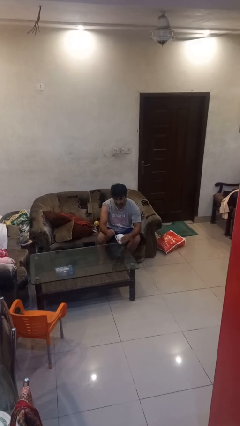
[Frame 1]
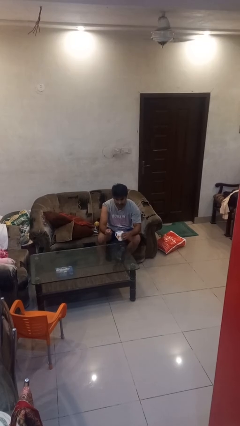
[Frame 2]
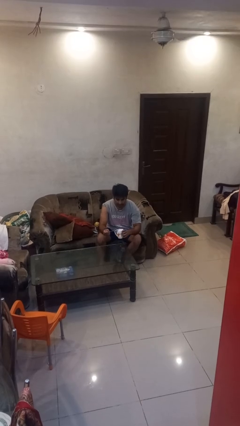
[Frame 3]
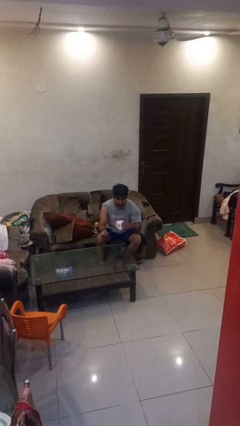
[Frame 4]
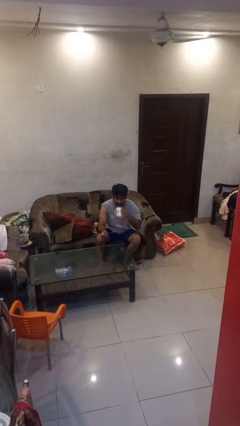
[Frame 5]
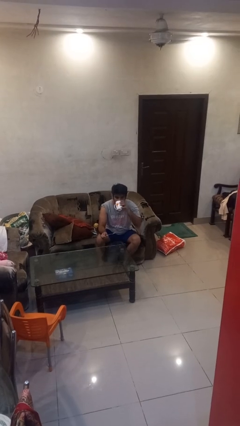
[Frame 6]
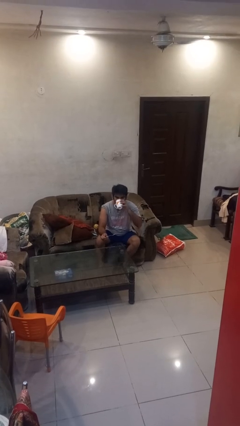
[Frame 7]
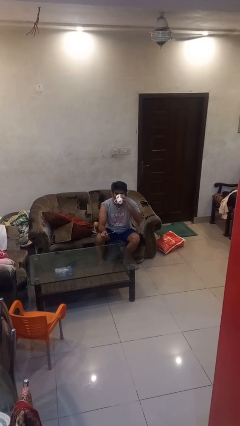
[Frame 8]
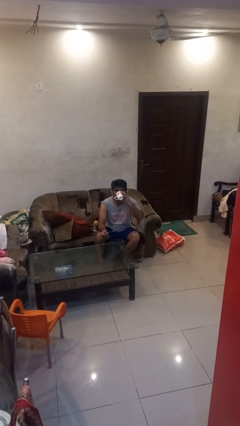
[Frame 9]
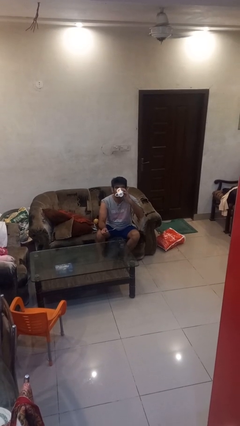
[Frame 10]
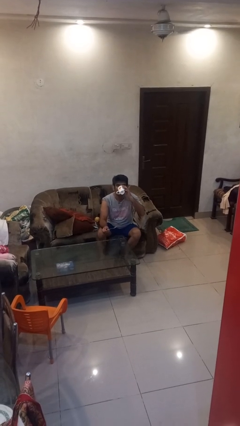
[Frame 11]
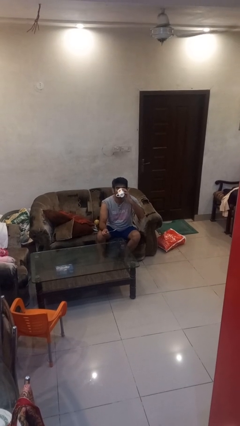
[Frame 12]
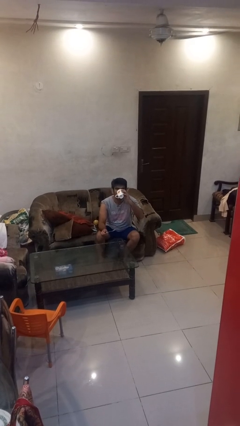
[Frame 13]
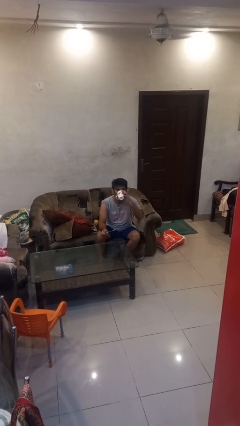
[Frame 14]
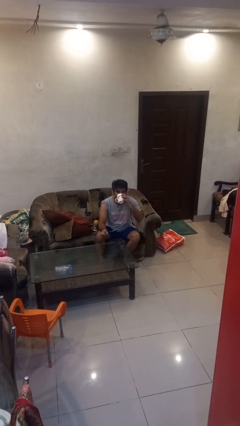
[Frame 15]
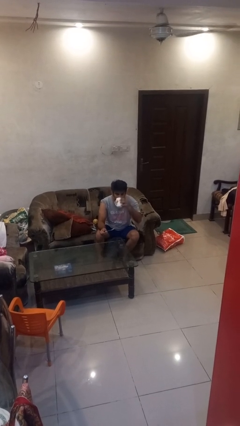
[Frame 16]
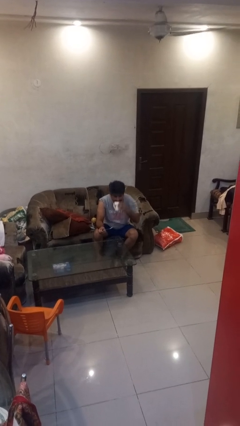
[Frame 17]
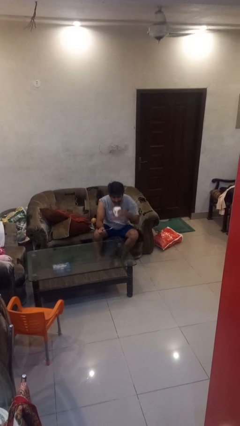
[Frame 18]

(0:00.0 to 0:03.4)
person drinks from mug

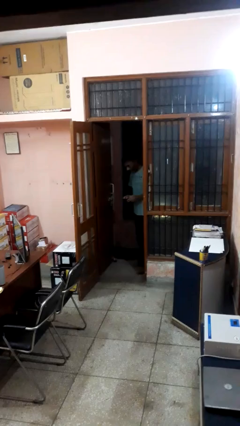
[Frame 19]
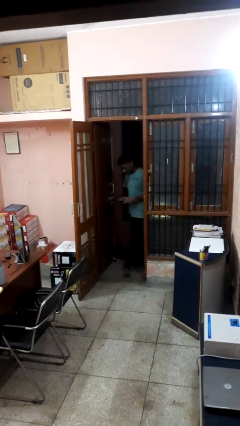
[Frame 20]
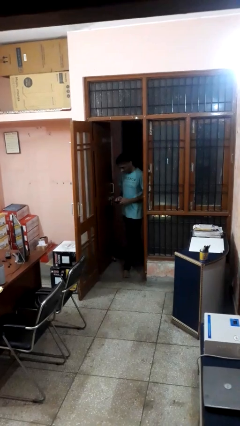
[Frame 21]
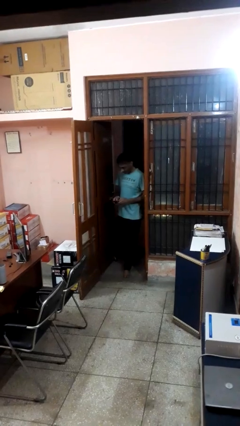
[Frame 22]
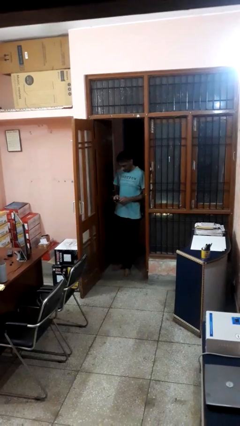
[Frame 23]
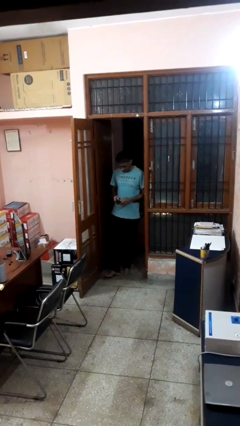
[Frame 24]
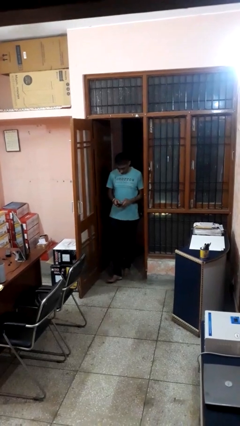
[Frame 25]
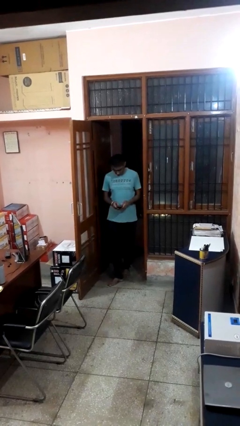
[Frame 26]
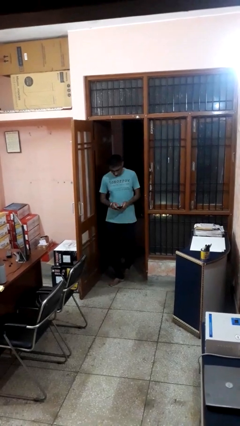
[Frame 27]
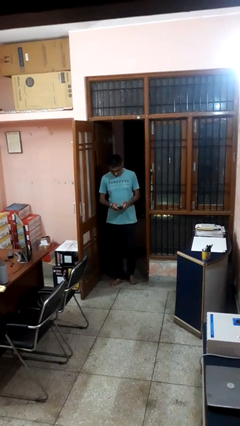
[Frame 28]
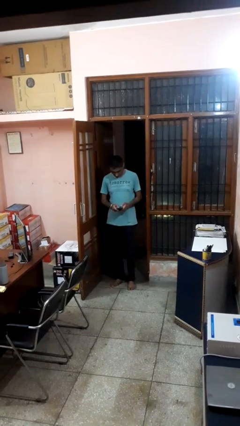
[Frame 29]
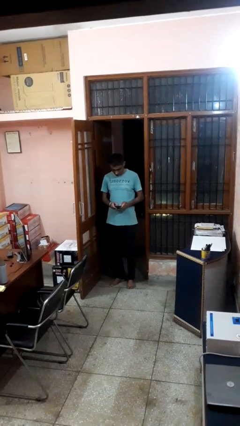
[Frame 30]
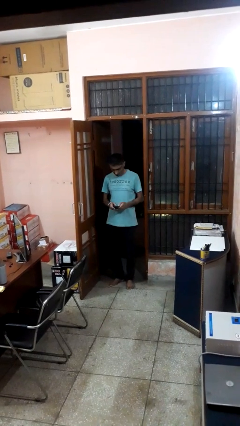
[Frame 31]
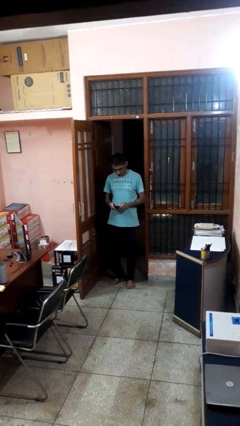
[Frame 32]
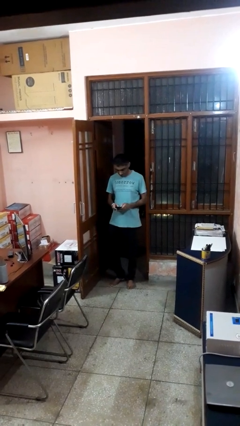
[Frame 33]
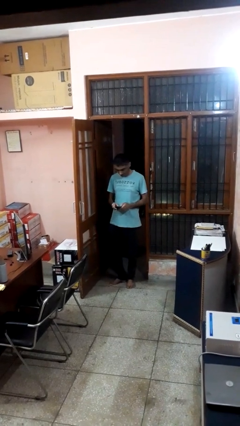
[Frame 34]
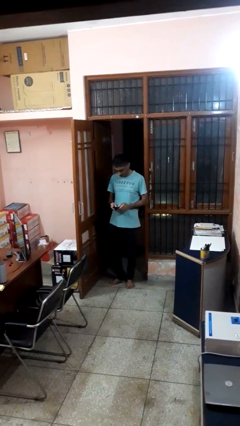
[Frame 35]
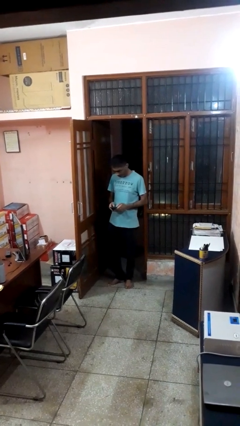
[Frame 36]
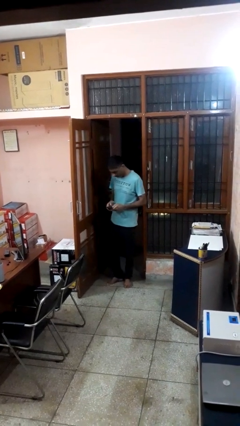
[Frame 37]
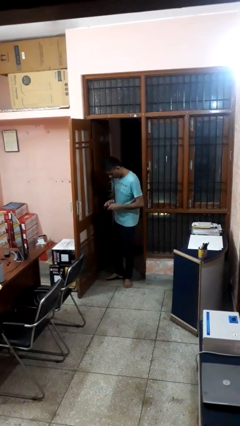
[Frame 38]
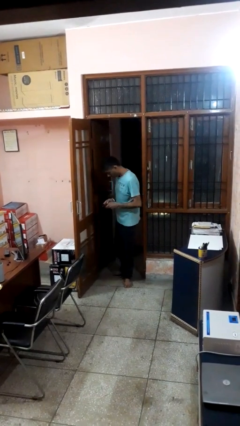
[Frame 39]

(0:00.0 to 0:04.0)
person enters scene through structure

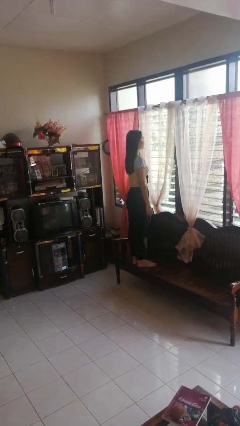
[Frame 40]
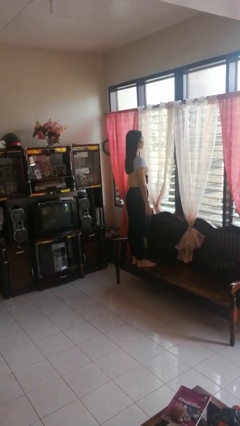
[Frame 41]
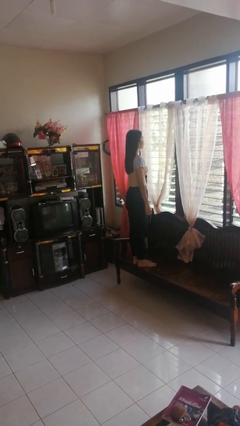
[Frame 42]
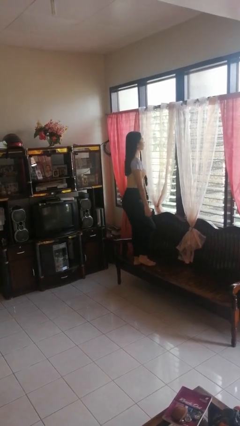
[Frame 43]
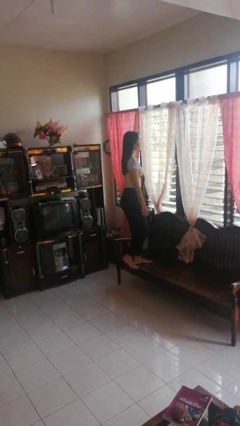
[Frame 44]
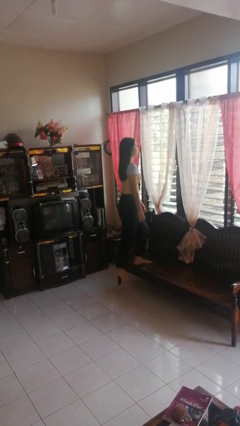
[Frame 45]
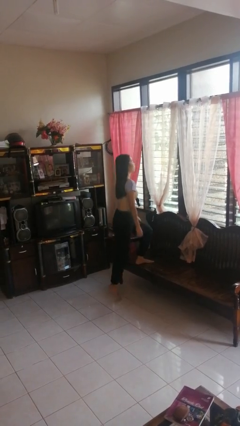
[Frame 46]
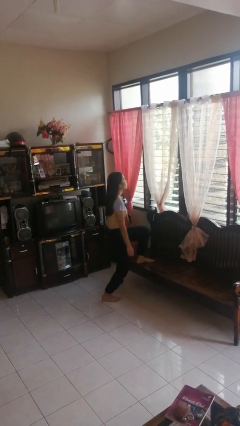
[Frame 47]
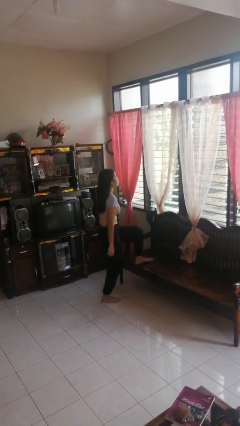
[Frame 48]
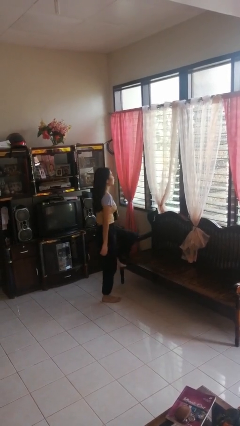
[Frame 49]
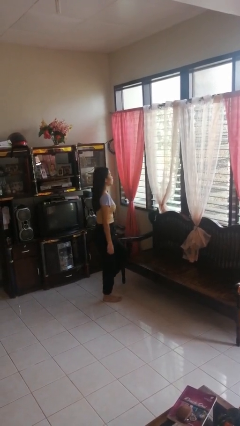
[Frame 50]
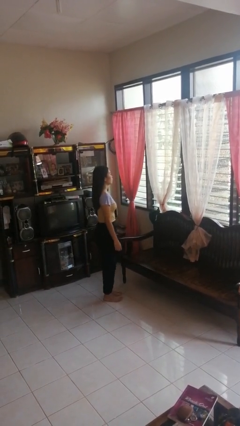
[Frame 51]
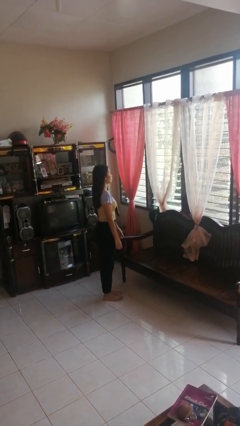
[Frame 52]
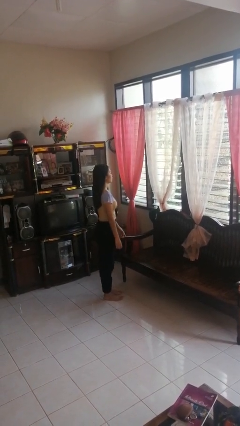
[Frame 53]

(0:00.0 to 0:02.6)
person climbs off couch

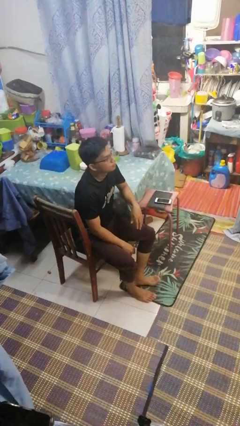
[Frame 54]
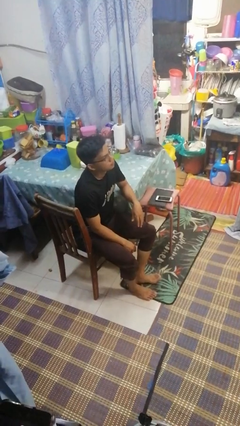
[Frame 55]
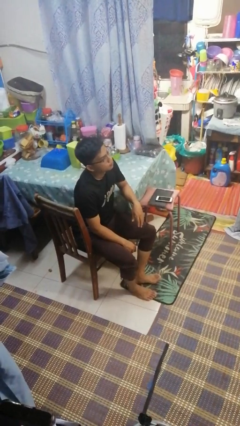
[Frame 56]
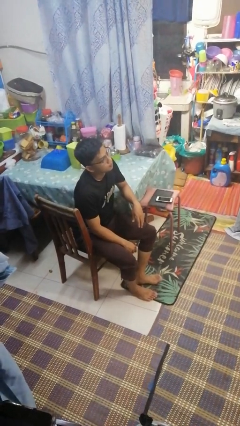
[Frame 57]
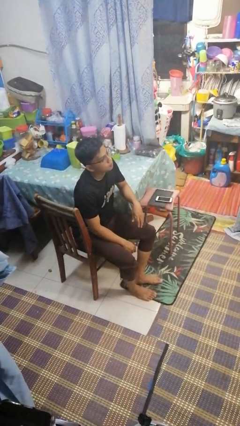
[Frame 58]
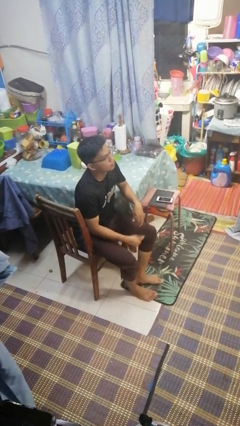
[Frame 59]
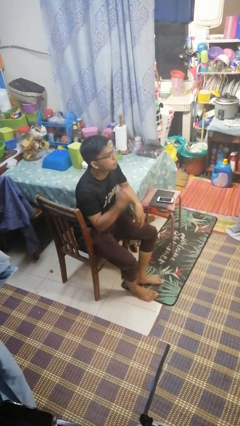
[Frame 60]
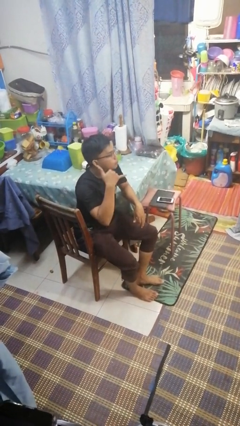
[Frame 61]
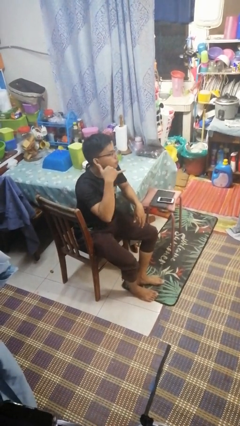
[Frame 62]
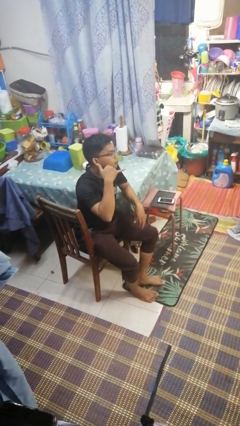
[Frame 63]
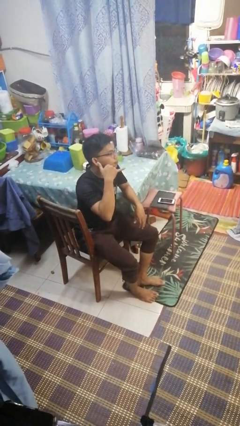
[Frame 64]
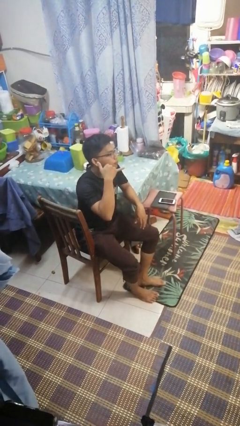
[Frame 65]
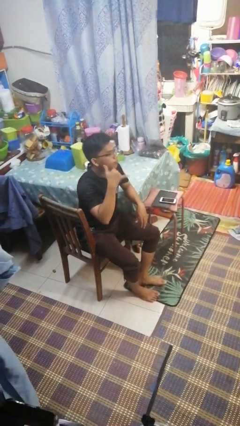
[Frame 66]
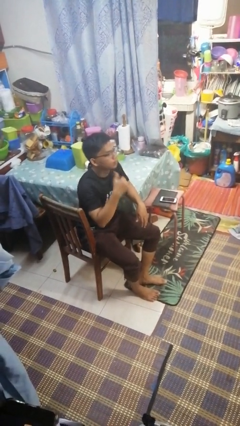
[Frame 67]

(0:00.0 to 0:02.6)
person gestures call me

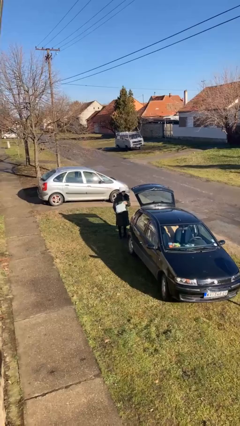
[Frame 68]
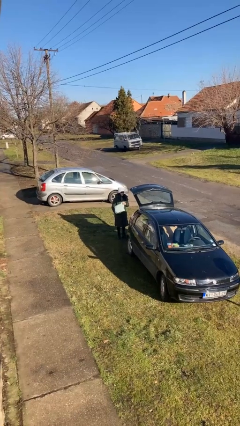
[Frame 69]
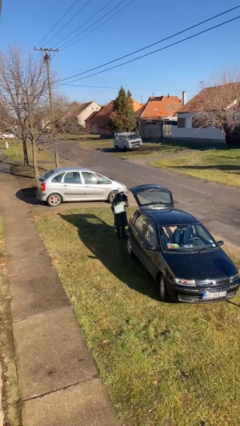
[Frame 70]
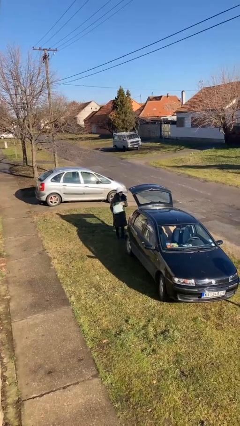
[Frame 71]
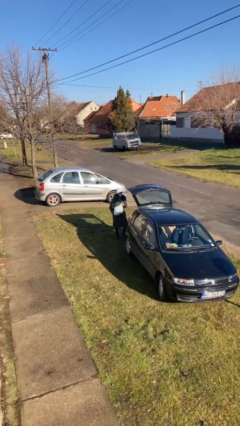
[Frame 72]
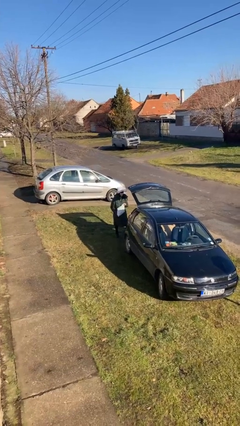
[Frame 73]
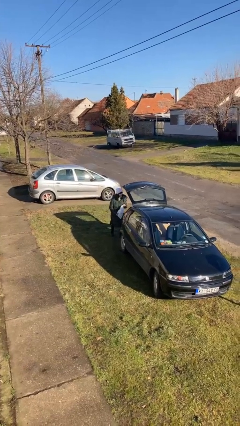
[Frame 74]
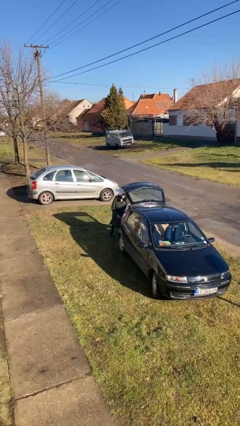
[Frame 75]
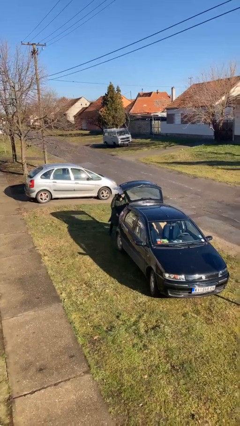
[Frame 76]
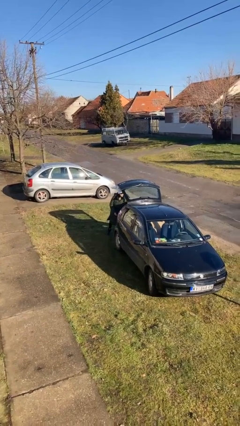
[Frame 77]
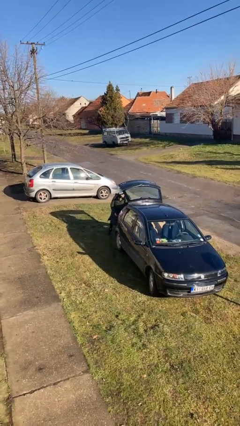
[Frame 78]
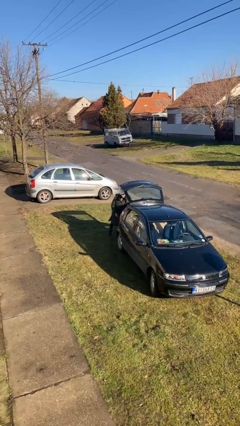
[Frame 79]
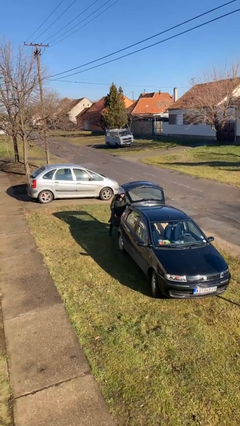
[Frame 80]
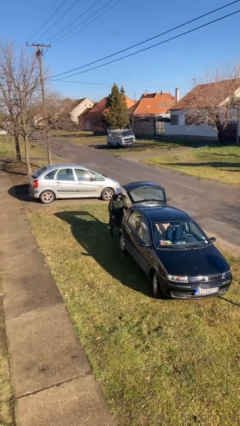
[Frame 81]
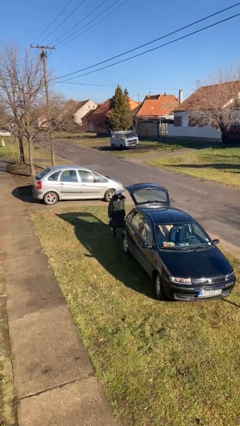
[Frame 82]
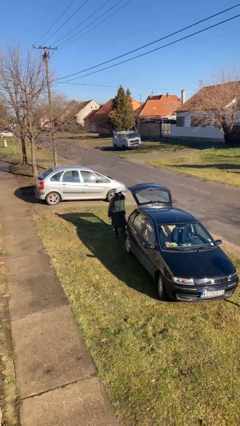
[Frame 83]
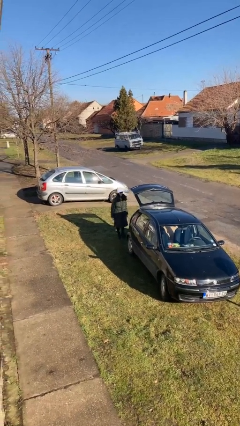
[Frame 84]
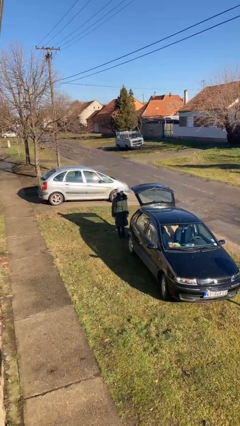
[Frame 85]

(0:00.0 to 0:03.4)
person loads car

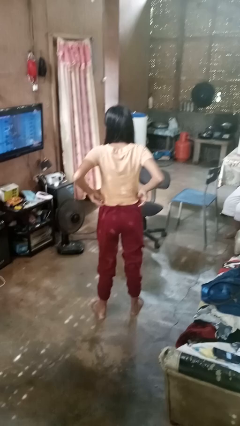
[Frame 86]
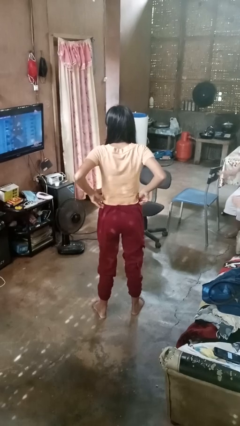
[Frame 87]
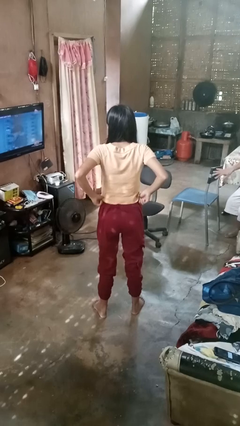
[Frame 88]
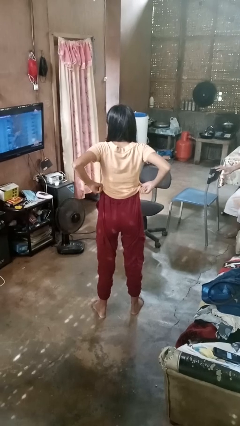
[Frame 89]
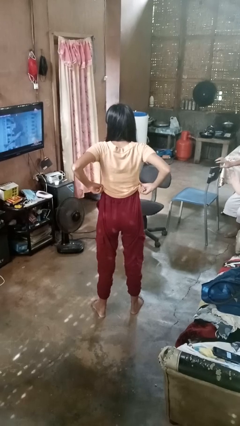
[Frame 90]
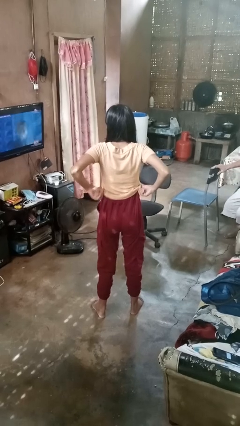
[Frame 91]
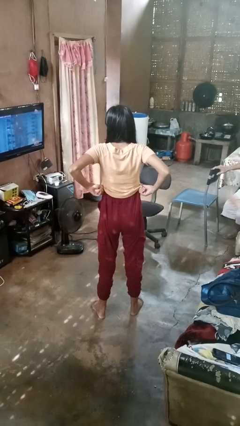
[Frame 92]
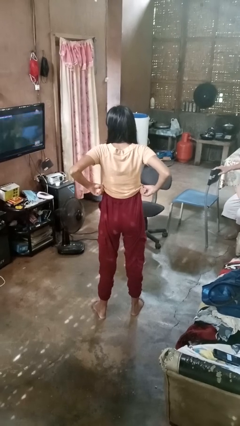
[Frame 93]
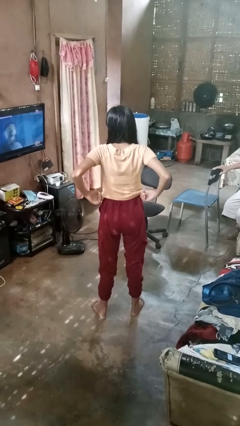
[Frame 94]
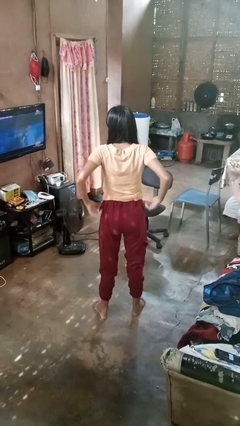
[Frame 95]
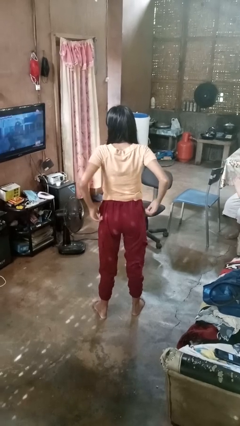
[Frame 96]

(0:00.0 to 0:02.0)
person hikes up pants
